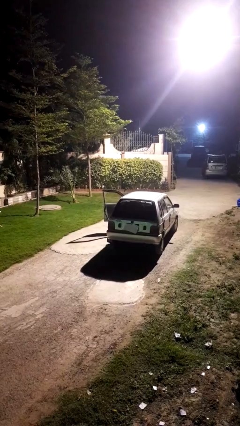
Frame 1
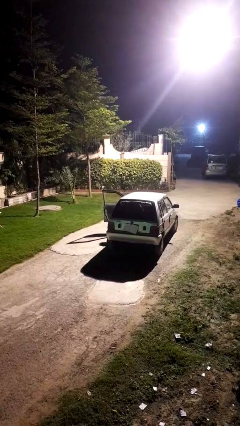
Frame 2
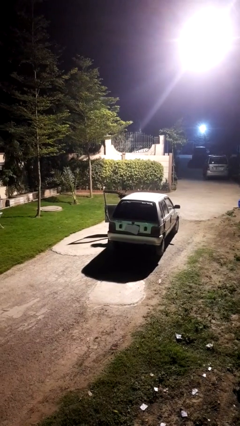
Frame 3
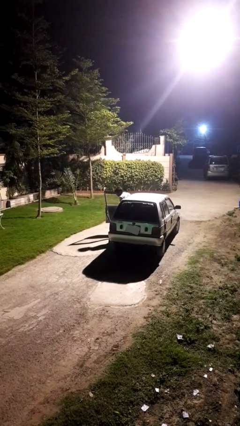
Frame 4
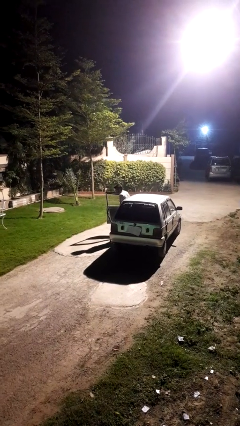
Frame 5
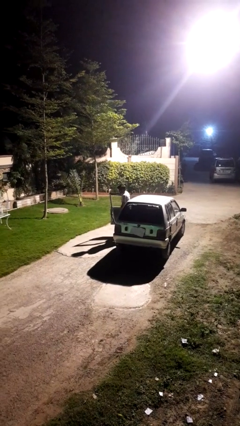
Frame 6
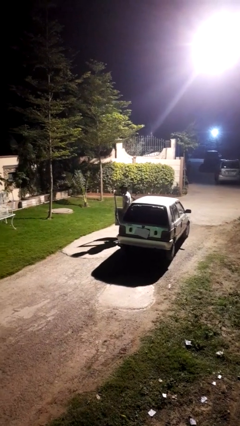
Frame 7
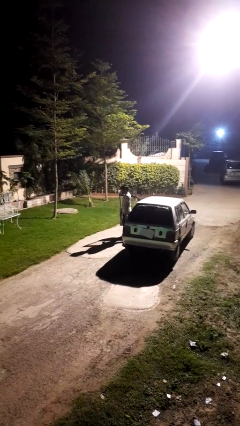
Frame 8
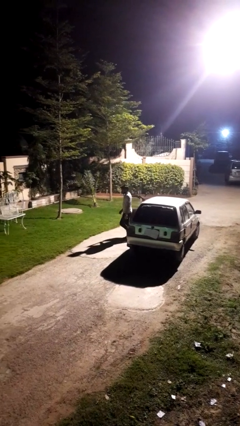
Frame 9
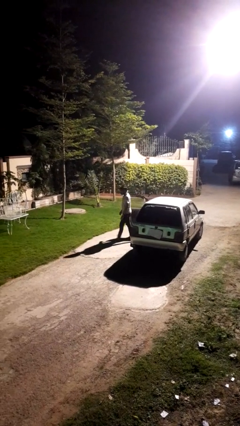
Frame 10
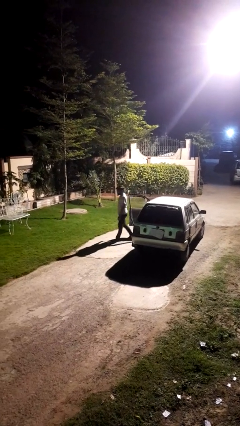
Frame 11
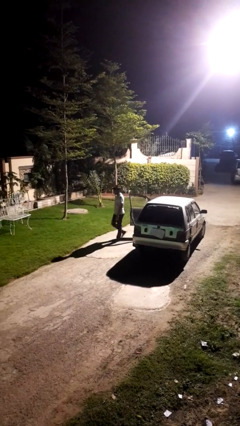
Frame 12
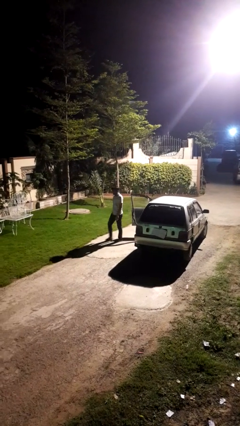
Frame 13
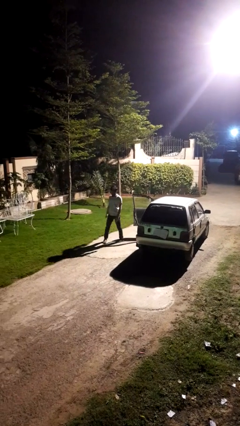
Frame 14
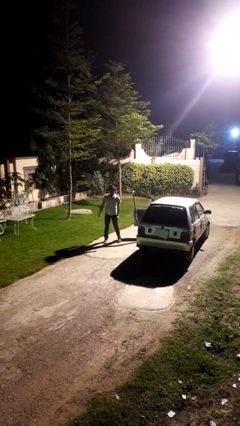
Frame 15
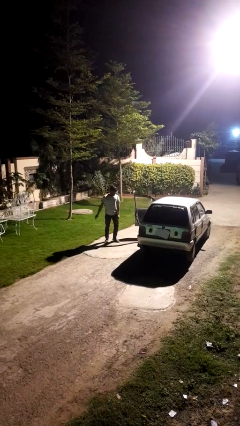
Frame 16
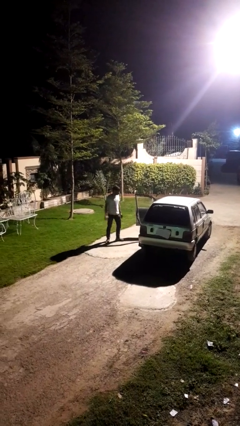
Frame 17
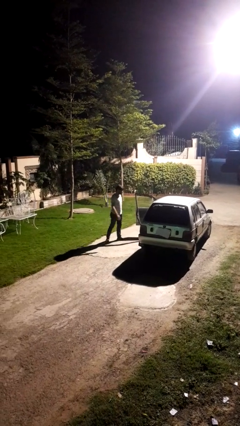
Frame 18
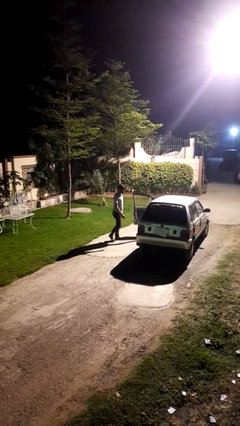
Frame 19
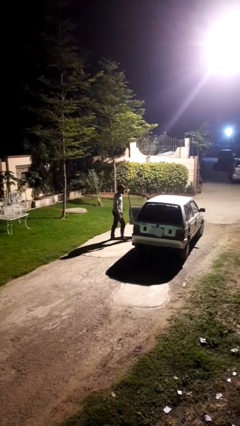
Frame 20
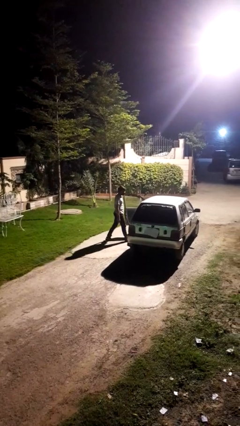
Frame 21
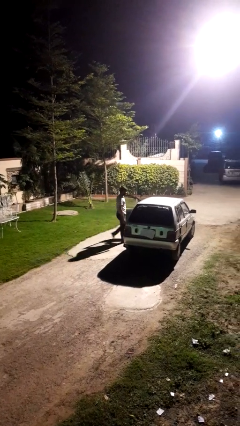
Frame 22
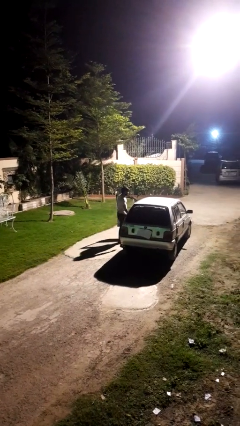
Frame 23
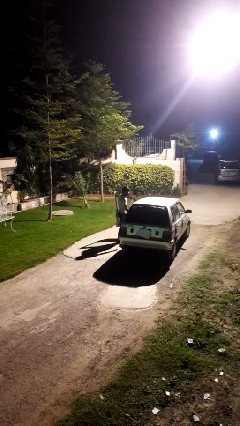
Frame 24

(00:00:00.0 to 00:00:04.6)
person exits car

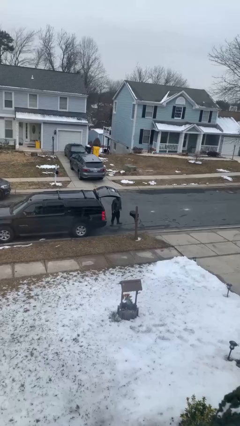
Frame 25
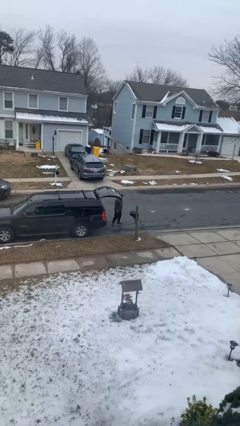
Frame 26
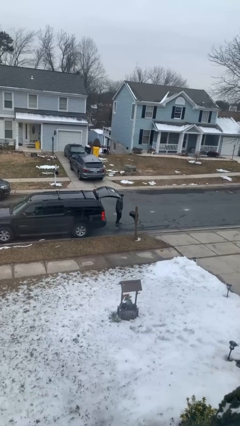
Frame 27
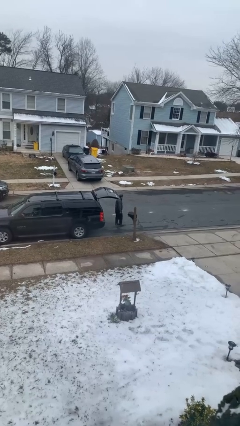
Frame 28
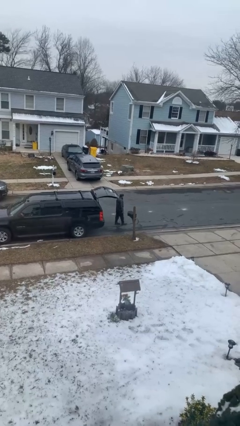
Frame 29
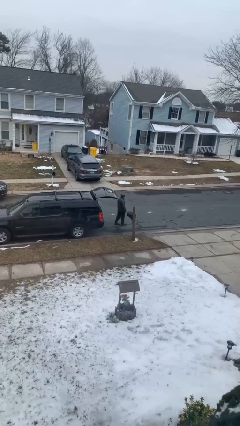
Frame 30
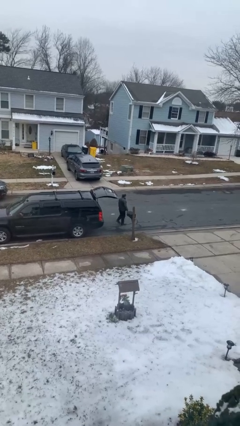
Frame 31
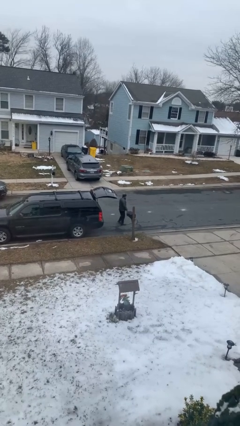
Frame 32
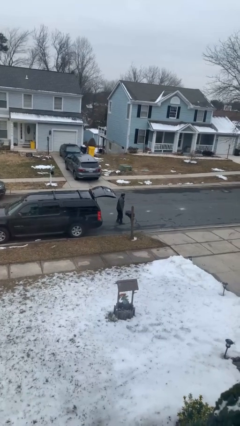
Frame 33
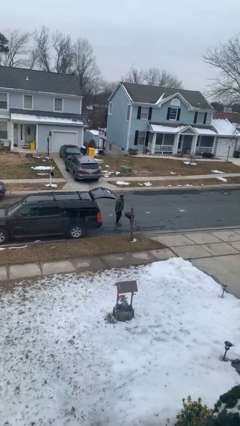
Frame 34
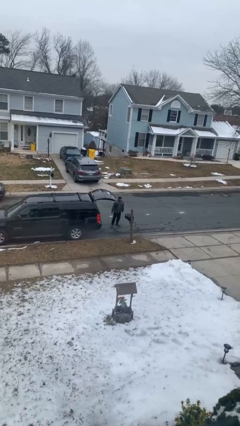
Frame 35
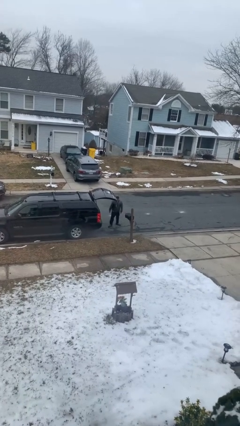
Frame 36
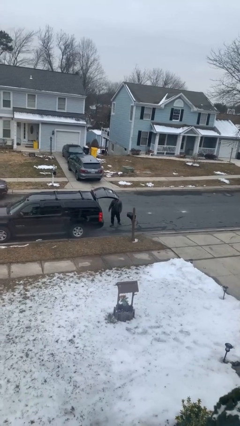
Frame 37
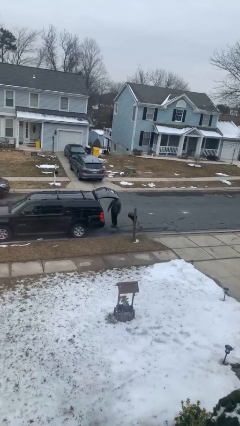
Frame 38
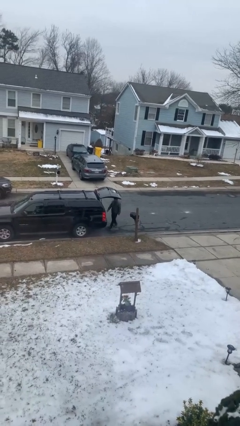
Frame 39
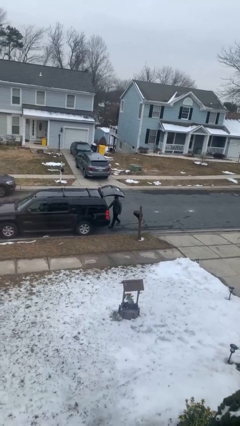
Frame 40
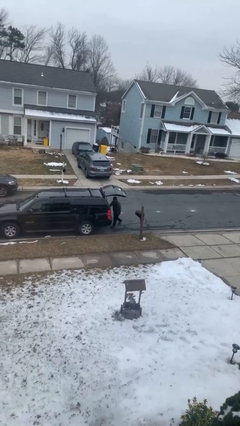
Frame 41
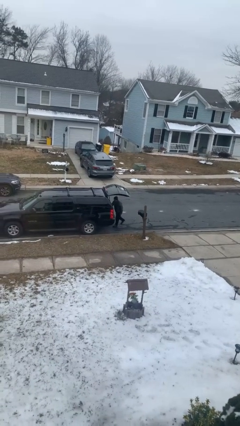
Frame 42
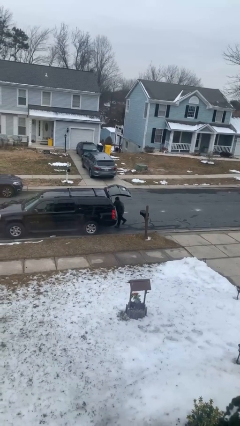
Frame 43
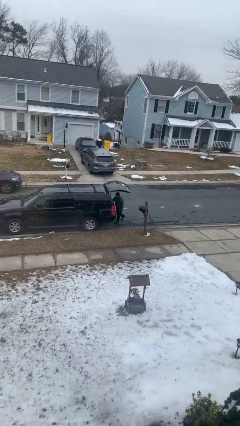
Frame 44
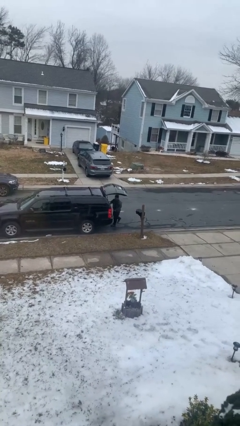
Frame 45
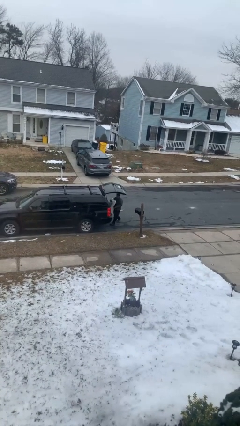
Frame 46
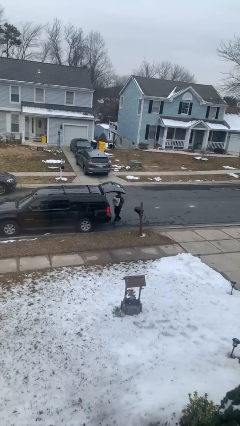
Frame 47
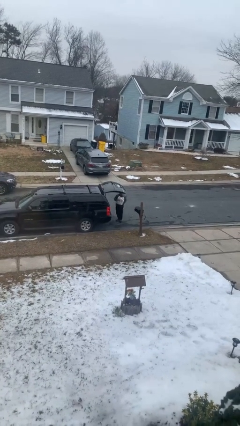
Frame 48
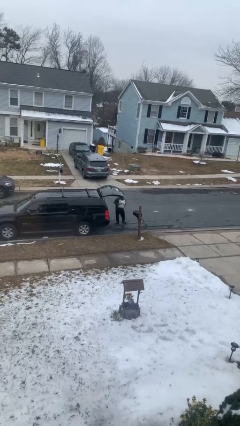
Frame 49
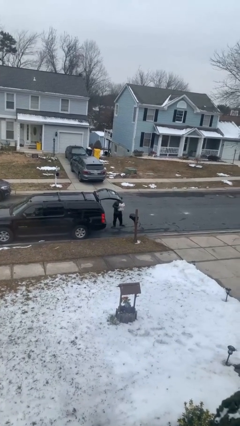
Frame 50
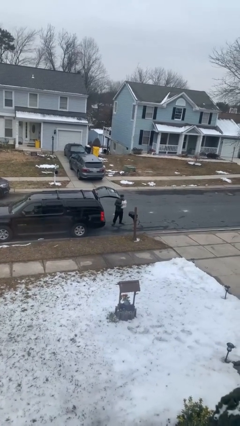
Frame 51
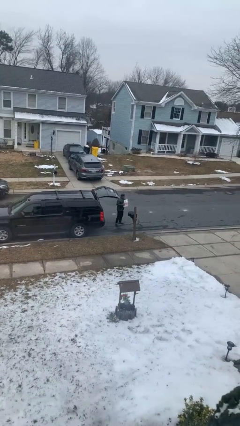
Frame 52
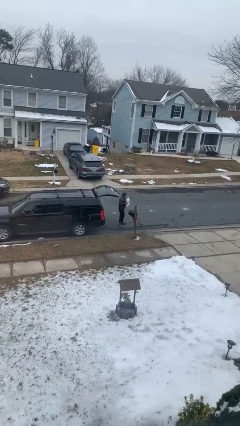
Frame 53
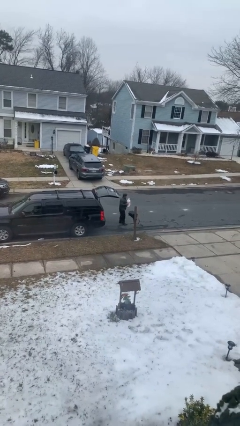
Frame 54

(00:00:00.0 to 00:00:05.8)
person unloads car

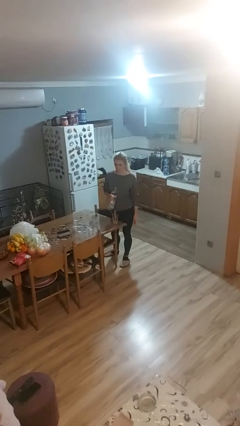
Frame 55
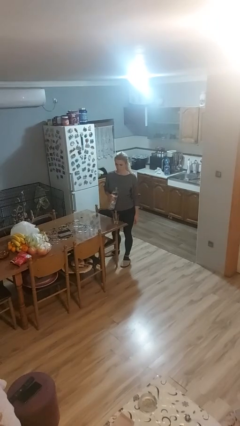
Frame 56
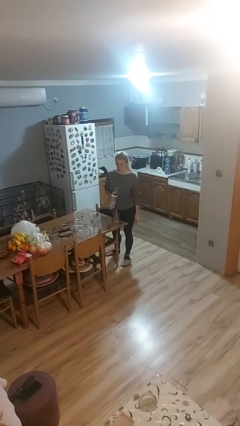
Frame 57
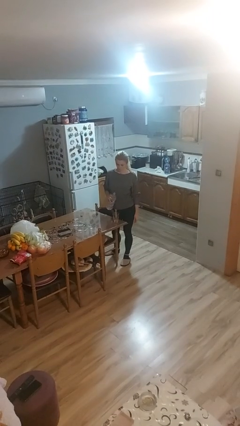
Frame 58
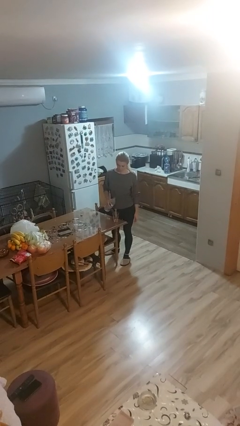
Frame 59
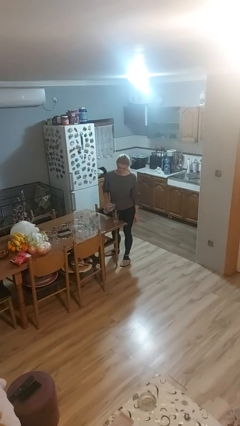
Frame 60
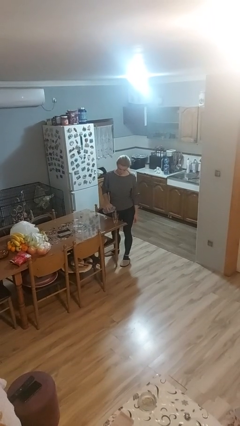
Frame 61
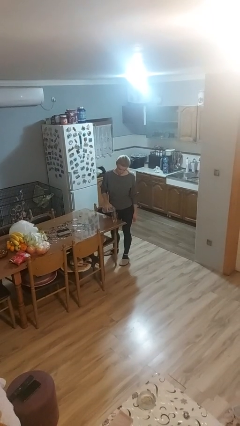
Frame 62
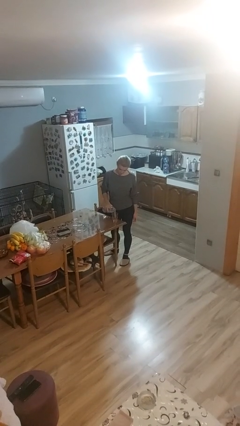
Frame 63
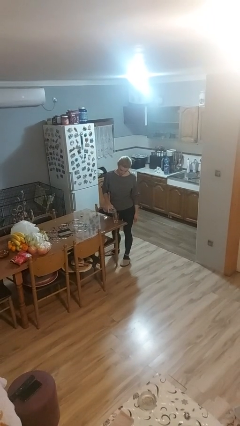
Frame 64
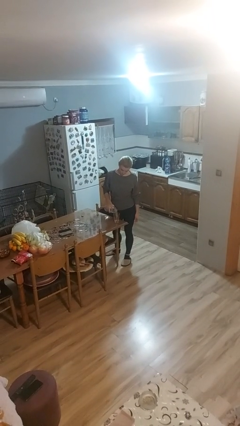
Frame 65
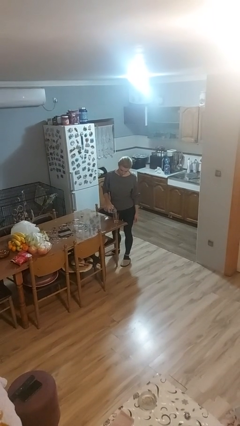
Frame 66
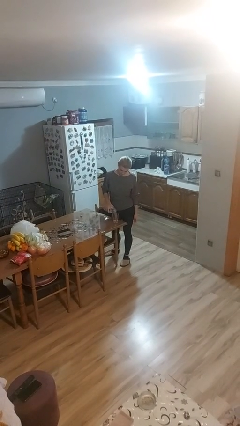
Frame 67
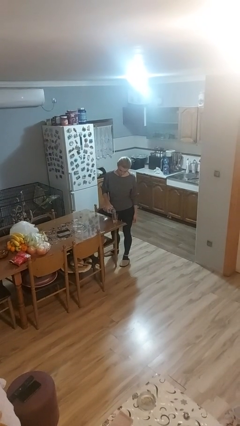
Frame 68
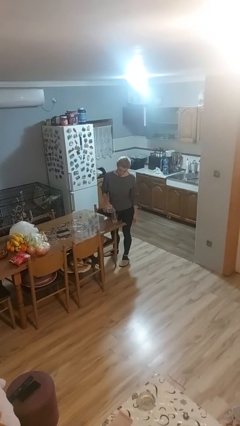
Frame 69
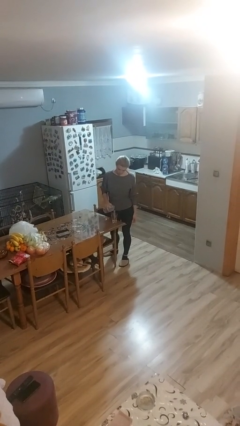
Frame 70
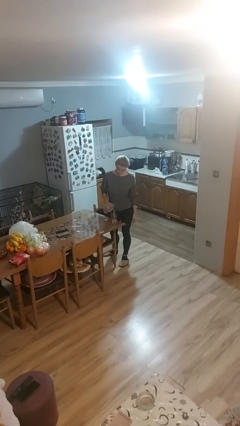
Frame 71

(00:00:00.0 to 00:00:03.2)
person pours liquid into cup

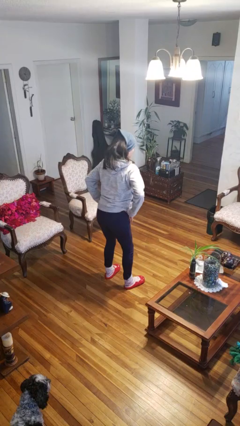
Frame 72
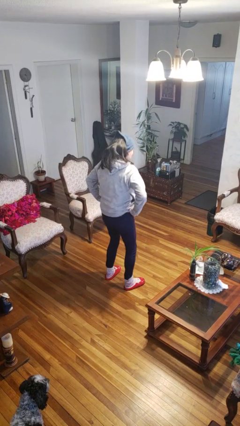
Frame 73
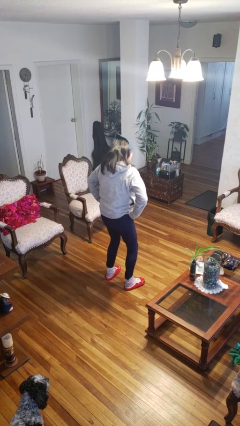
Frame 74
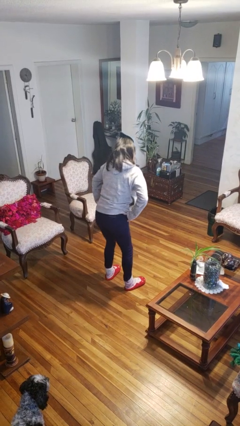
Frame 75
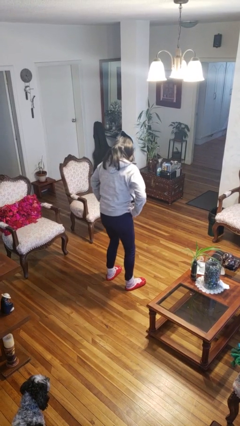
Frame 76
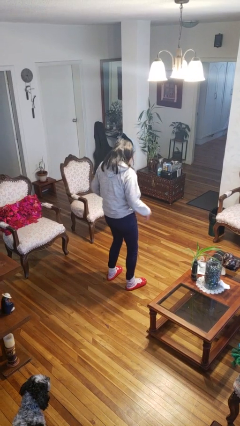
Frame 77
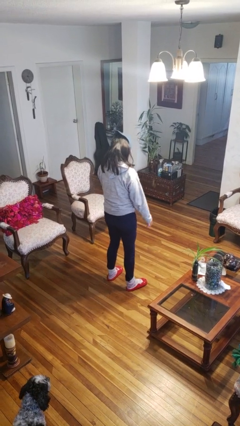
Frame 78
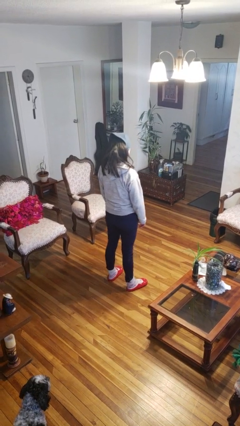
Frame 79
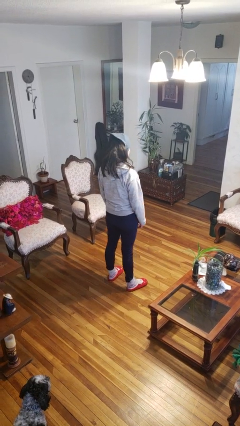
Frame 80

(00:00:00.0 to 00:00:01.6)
person wiggles hips

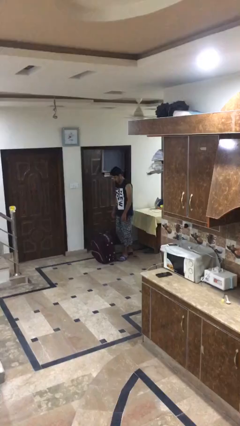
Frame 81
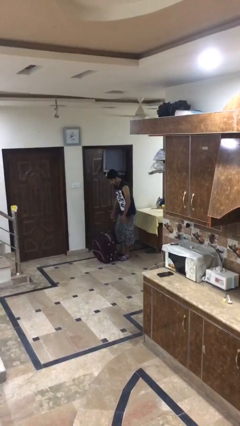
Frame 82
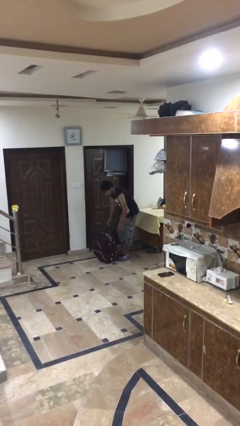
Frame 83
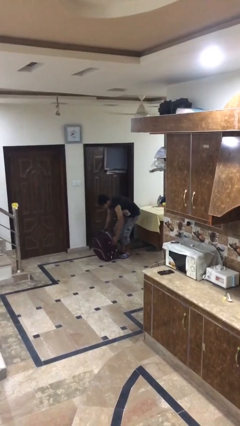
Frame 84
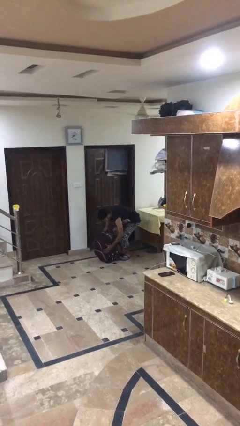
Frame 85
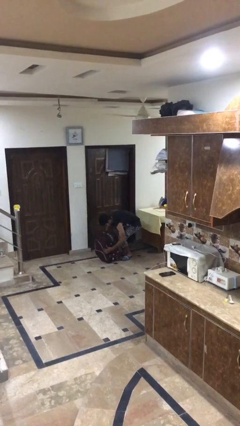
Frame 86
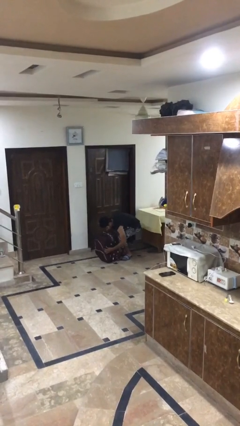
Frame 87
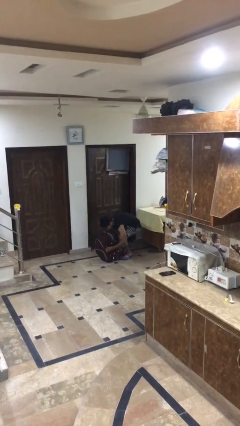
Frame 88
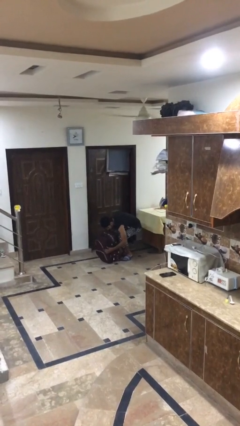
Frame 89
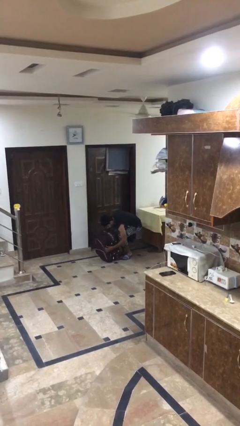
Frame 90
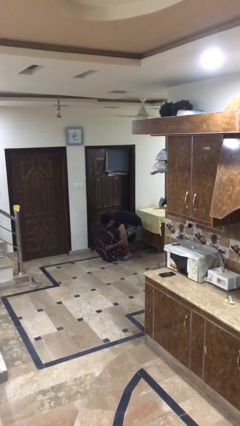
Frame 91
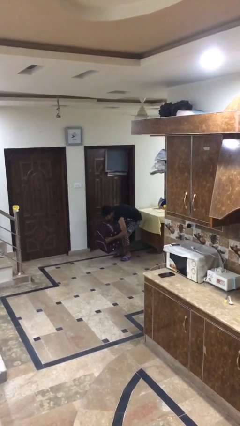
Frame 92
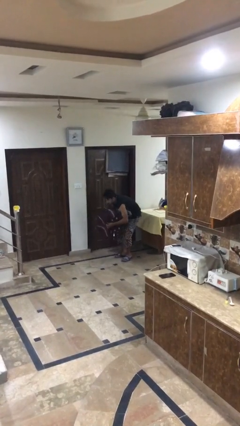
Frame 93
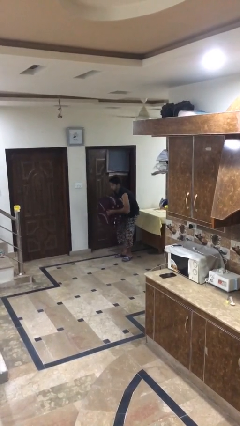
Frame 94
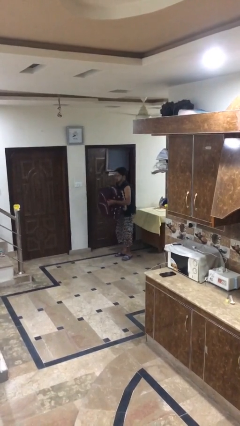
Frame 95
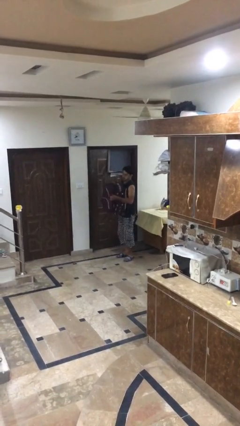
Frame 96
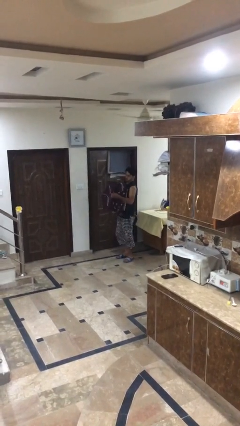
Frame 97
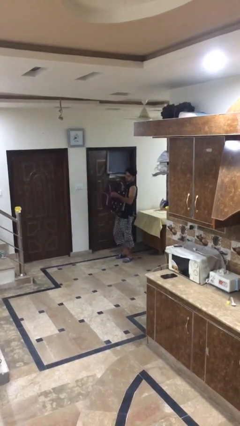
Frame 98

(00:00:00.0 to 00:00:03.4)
person picks up object from floor
